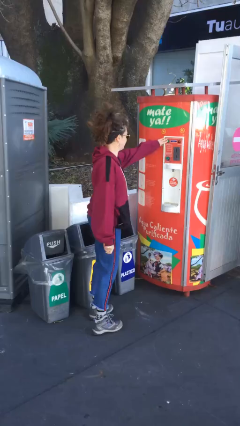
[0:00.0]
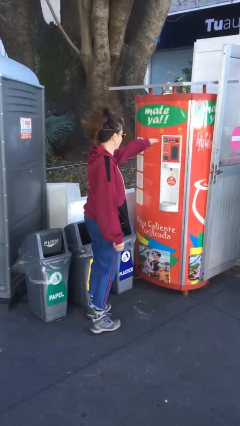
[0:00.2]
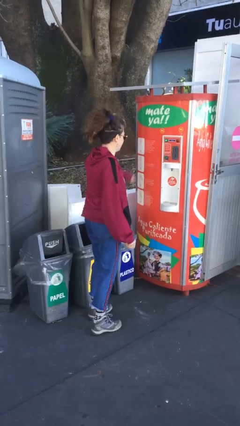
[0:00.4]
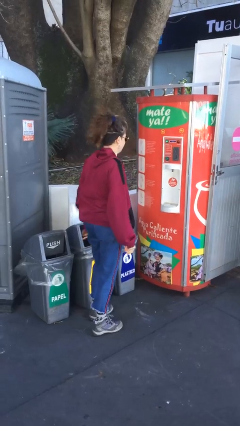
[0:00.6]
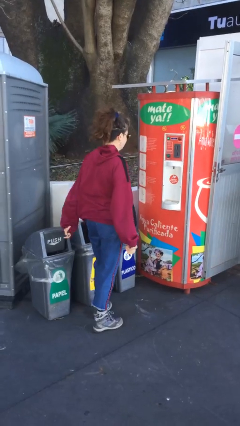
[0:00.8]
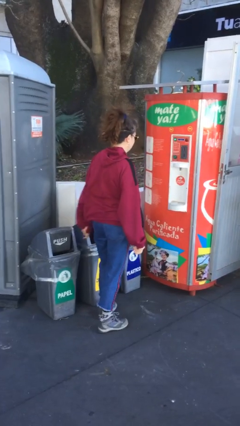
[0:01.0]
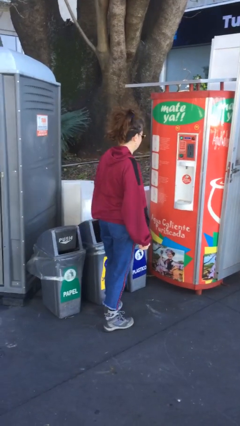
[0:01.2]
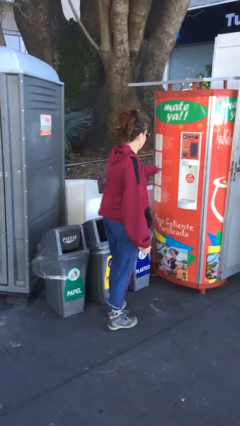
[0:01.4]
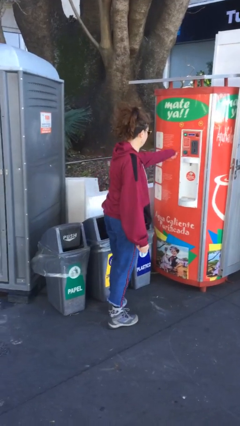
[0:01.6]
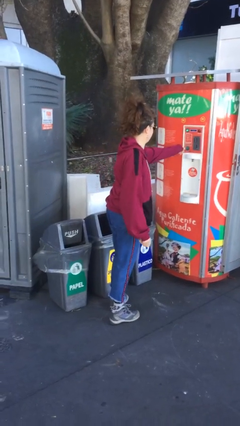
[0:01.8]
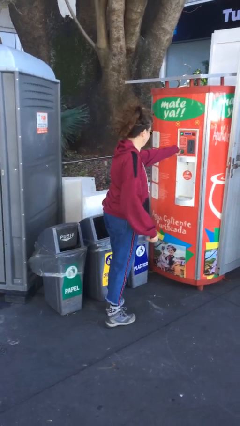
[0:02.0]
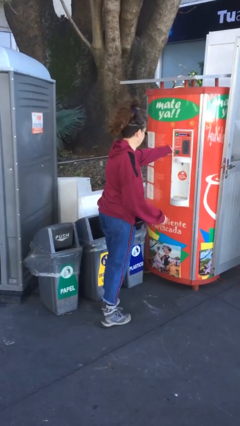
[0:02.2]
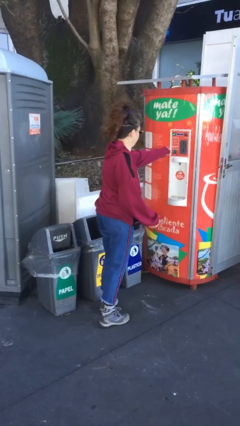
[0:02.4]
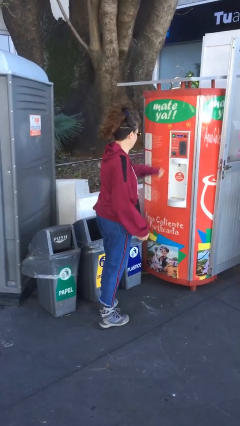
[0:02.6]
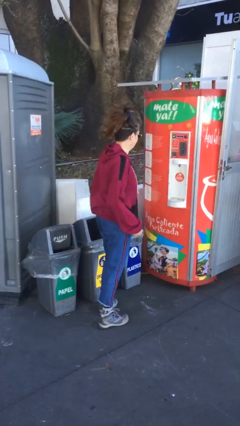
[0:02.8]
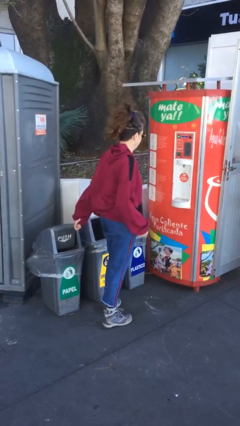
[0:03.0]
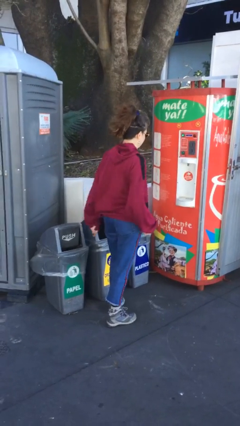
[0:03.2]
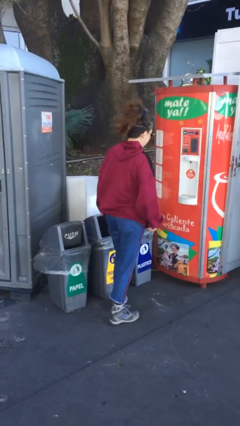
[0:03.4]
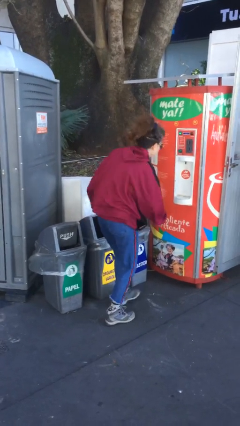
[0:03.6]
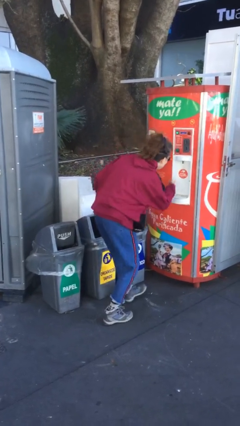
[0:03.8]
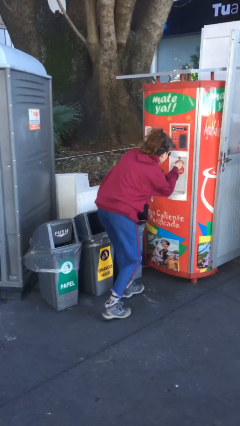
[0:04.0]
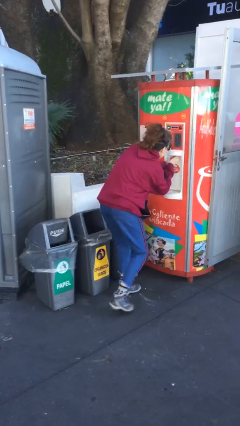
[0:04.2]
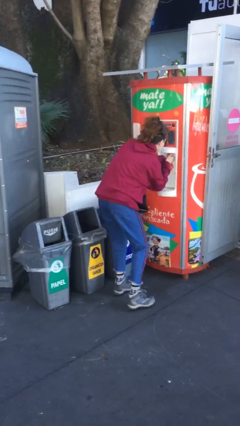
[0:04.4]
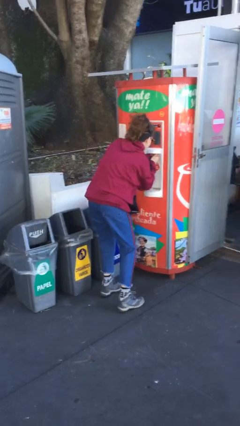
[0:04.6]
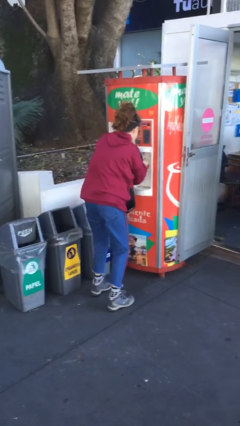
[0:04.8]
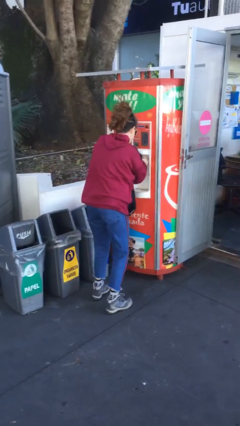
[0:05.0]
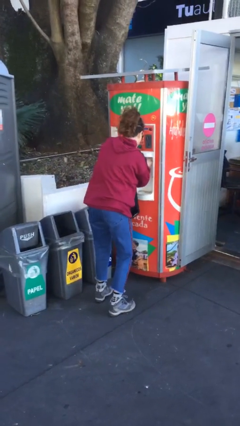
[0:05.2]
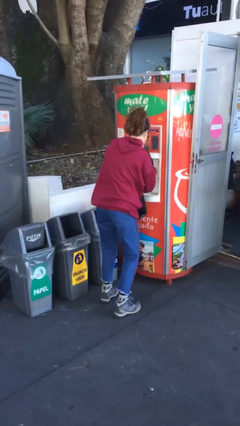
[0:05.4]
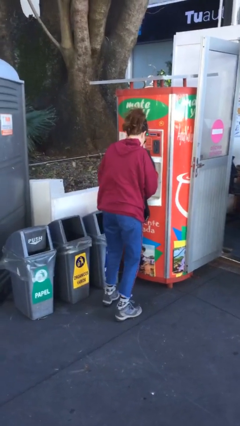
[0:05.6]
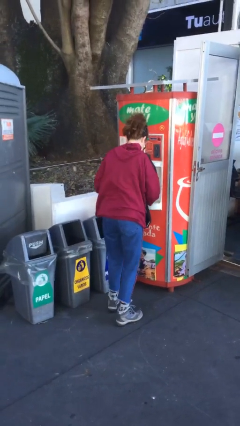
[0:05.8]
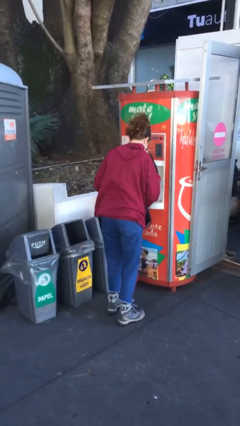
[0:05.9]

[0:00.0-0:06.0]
person purchases from machine

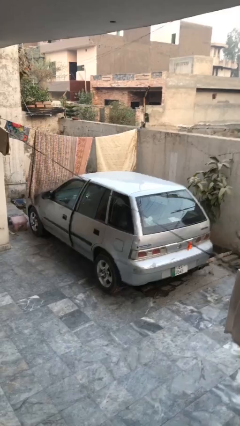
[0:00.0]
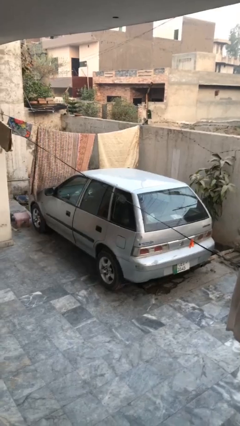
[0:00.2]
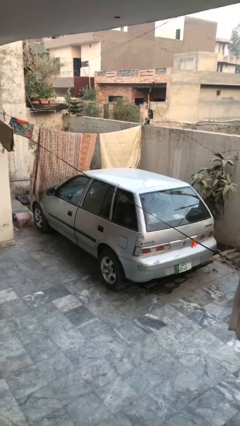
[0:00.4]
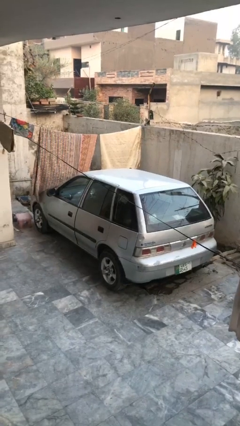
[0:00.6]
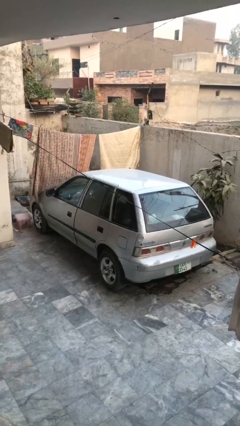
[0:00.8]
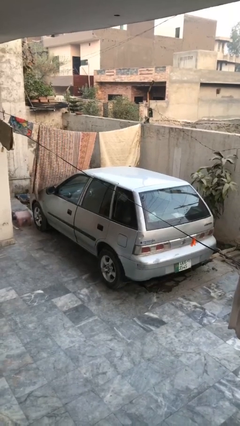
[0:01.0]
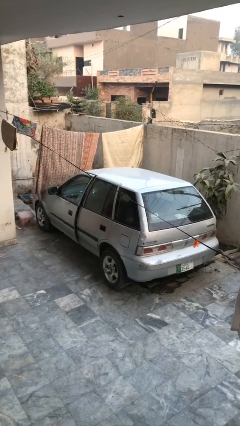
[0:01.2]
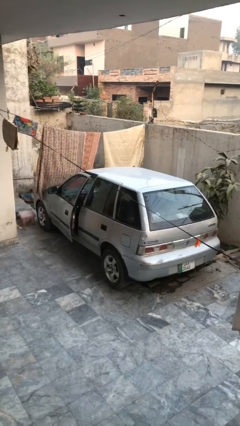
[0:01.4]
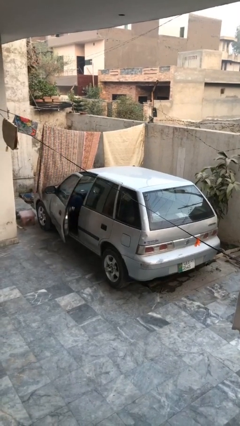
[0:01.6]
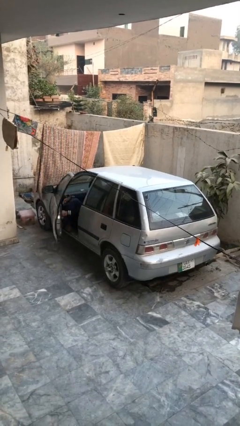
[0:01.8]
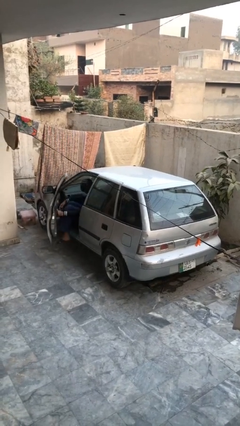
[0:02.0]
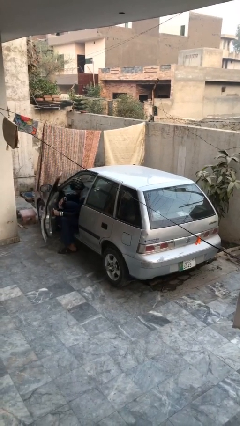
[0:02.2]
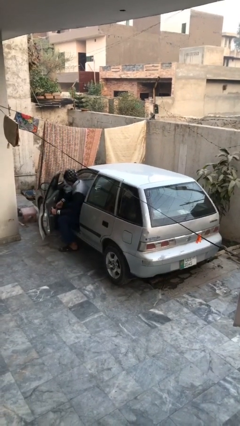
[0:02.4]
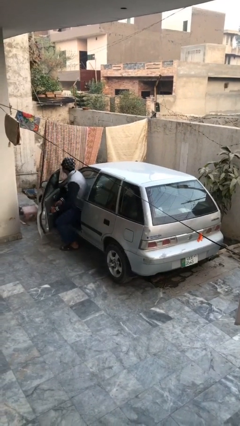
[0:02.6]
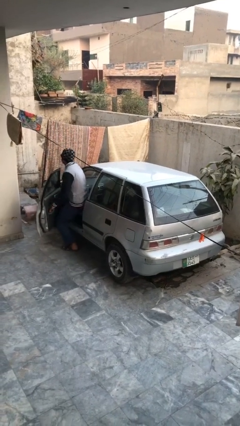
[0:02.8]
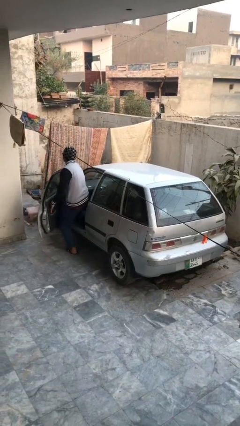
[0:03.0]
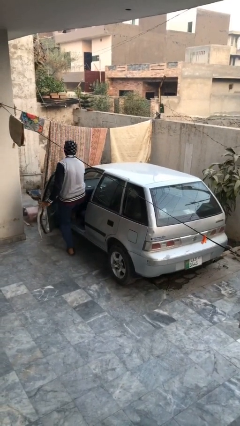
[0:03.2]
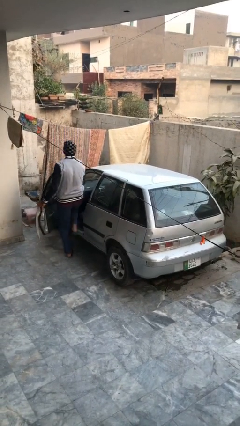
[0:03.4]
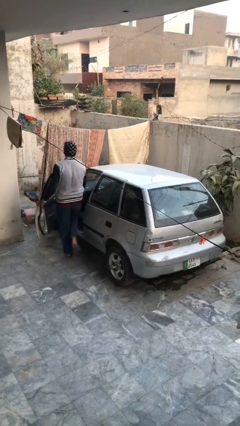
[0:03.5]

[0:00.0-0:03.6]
car drops off person

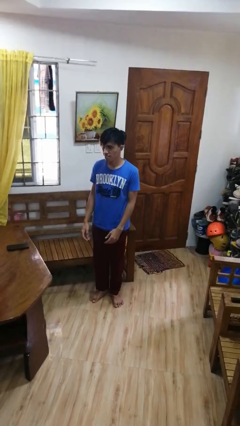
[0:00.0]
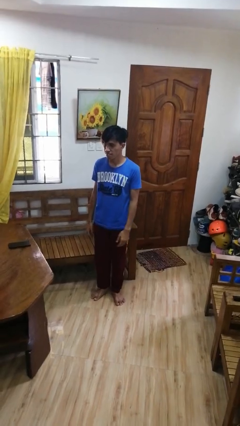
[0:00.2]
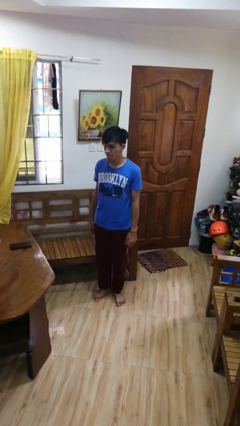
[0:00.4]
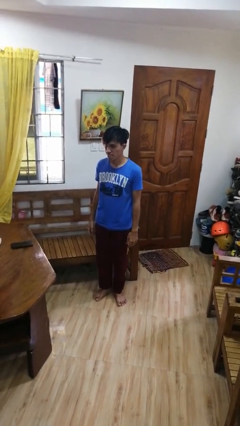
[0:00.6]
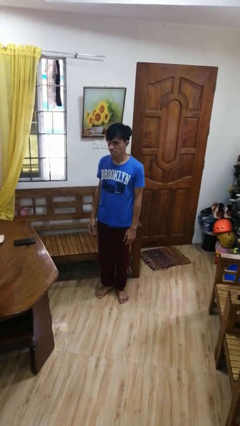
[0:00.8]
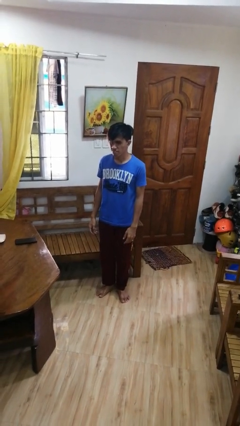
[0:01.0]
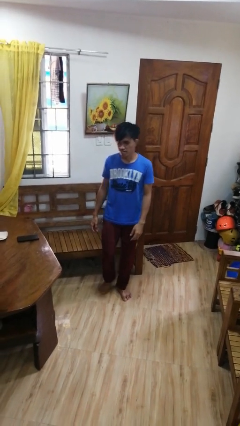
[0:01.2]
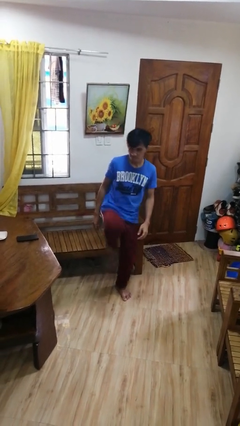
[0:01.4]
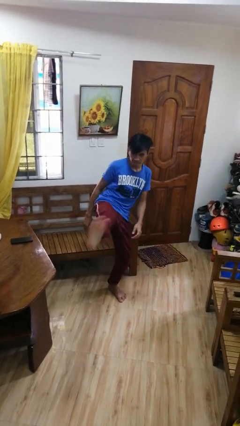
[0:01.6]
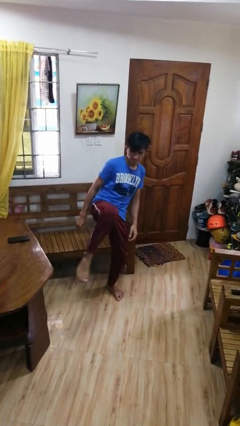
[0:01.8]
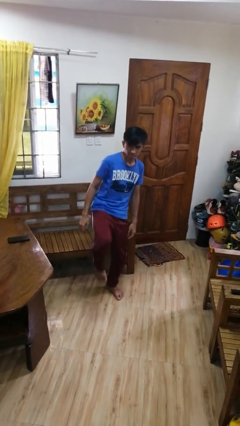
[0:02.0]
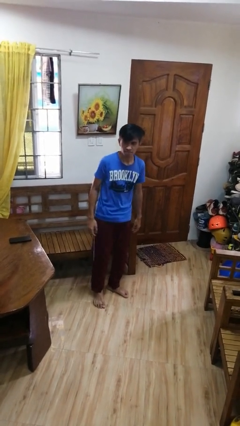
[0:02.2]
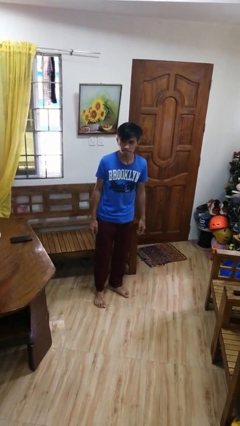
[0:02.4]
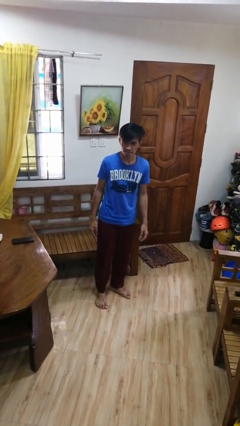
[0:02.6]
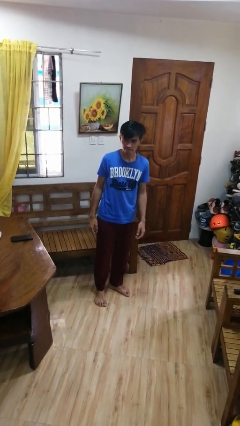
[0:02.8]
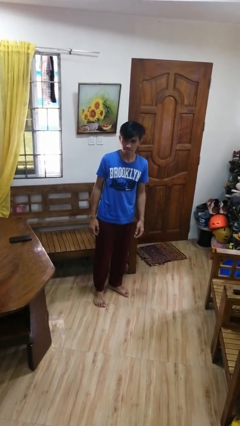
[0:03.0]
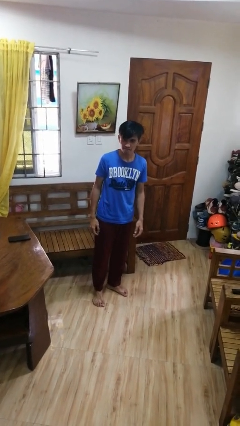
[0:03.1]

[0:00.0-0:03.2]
person karate kicks

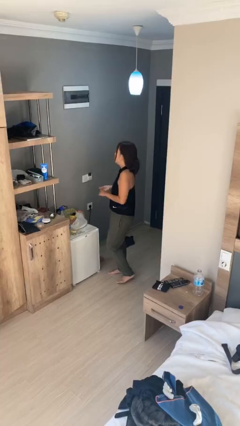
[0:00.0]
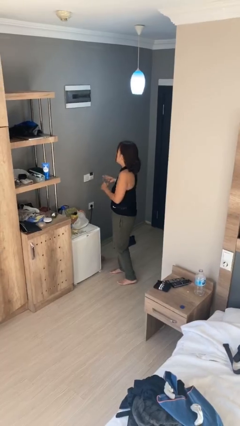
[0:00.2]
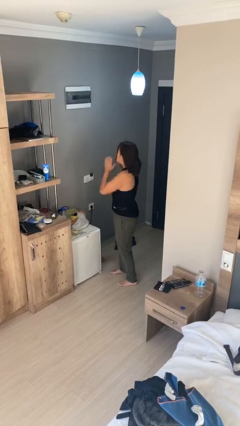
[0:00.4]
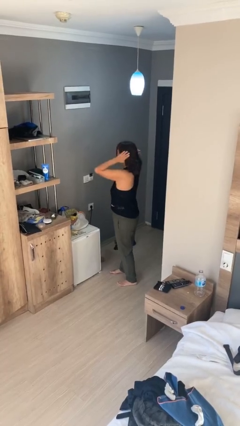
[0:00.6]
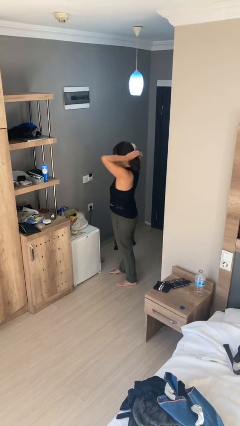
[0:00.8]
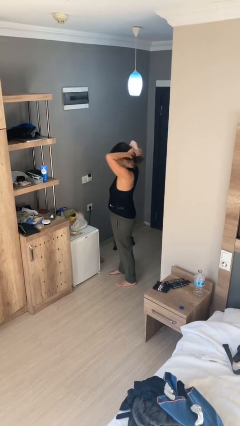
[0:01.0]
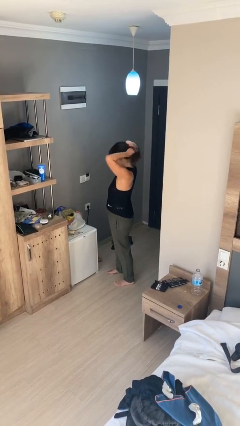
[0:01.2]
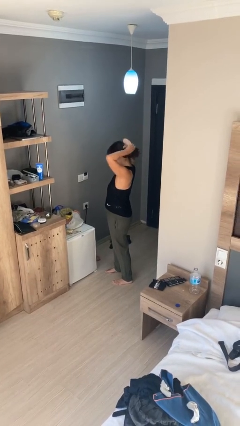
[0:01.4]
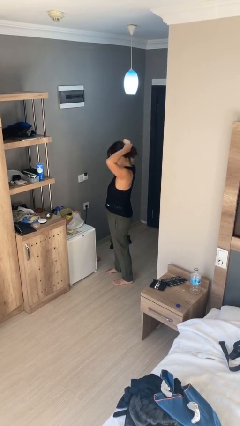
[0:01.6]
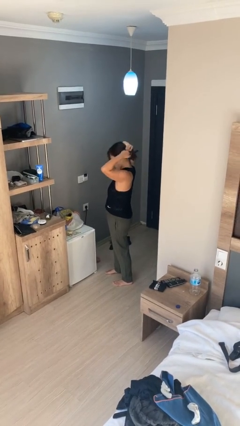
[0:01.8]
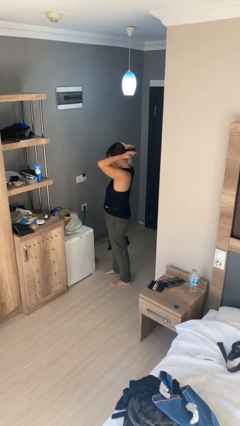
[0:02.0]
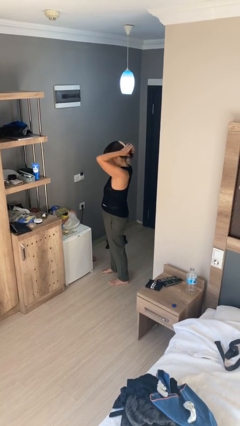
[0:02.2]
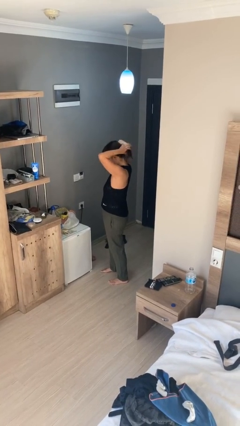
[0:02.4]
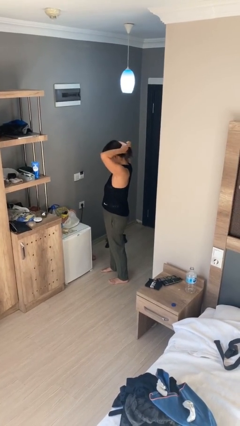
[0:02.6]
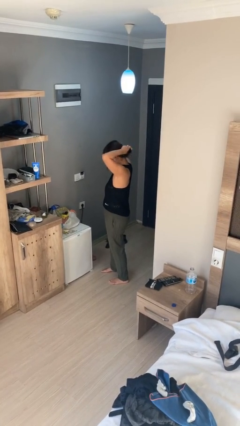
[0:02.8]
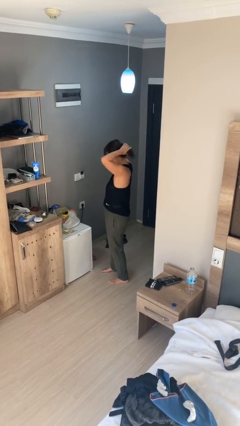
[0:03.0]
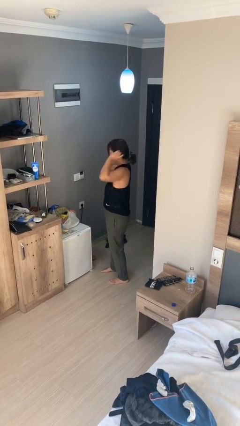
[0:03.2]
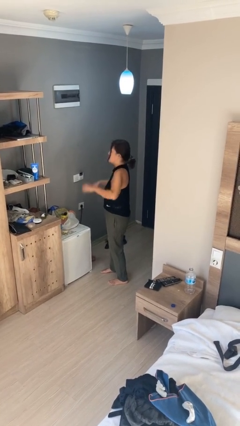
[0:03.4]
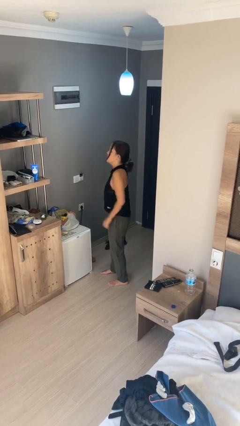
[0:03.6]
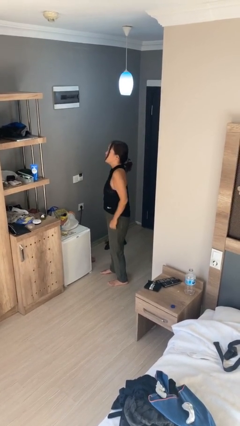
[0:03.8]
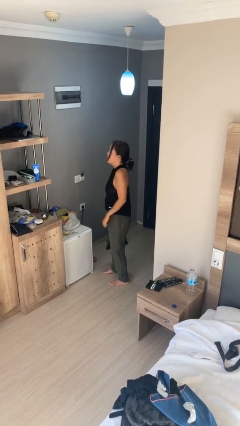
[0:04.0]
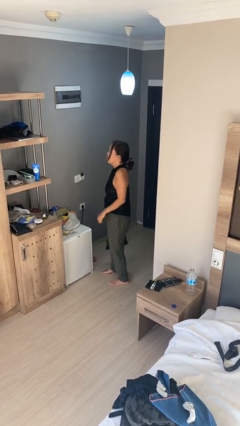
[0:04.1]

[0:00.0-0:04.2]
person puts hair in ponytail

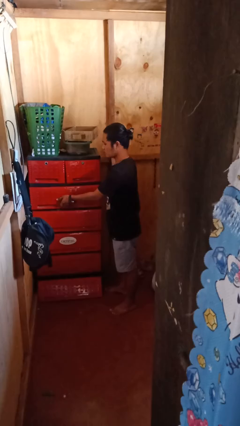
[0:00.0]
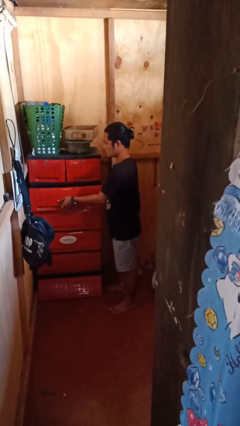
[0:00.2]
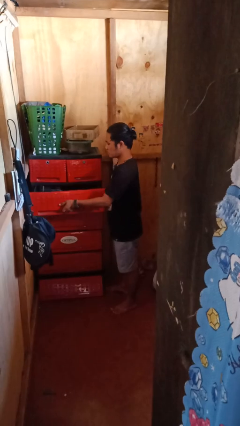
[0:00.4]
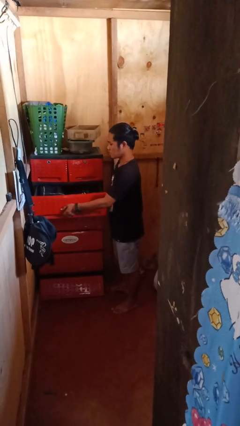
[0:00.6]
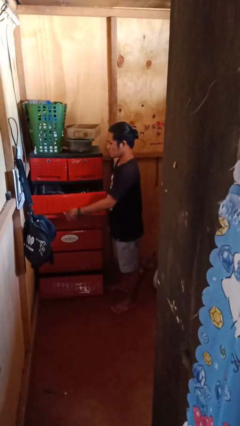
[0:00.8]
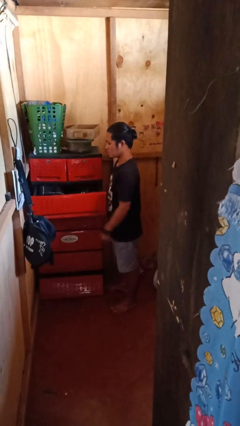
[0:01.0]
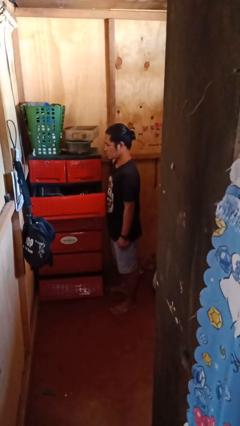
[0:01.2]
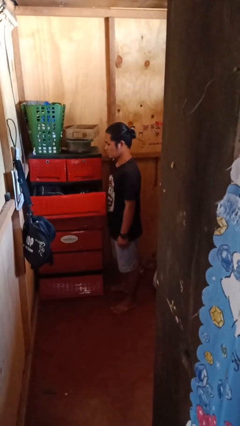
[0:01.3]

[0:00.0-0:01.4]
person opens dresser drawer
